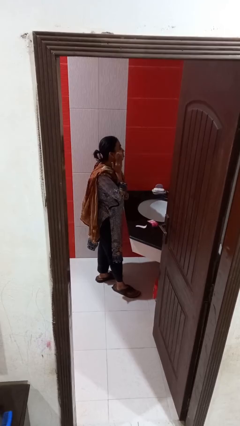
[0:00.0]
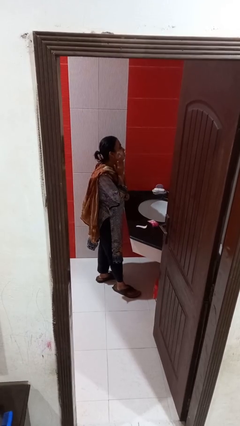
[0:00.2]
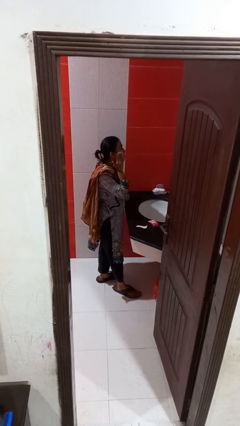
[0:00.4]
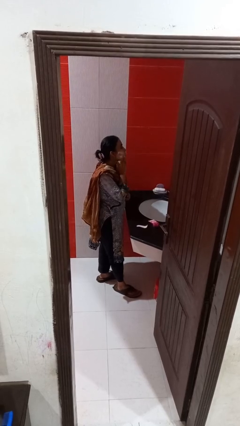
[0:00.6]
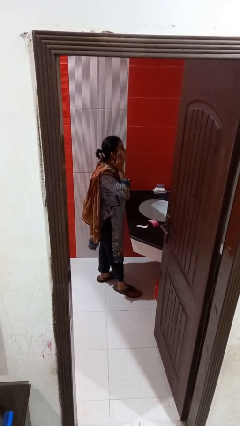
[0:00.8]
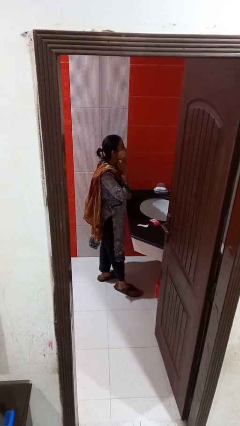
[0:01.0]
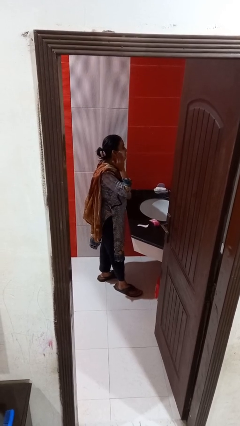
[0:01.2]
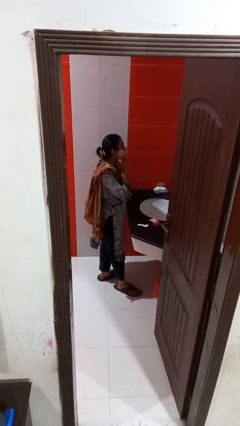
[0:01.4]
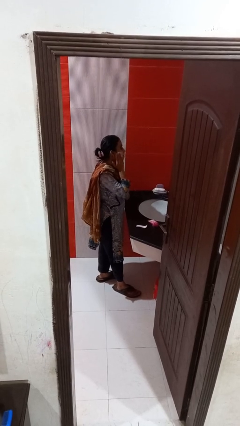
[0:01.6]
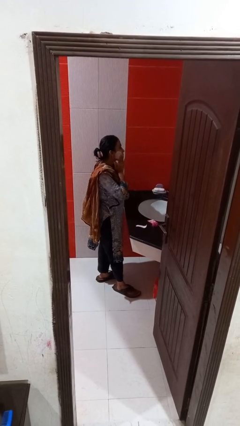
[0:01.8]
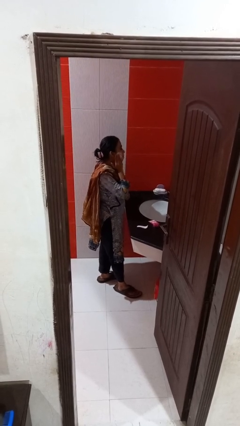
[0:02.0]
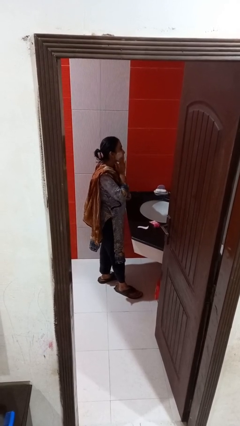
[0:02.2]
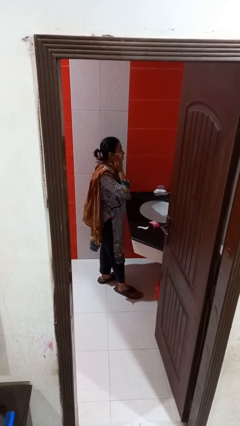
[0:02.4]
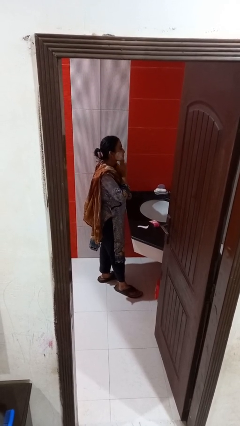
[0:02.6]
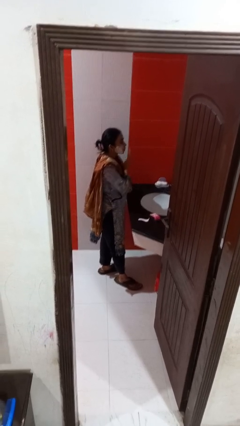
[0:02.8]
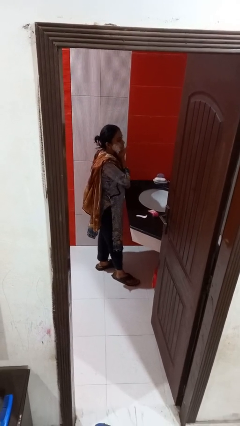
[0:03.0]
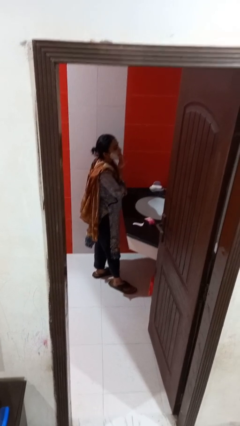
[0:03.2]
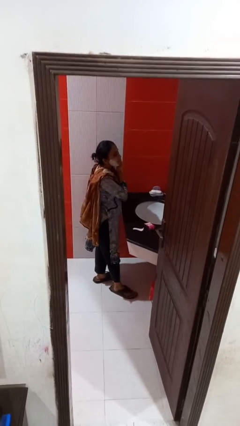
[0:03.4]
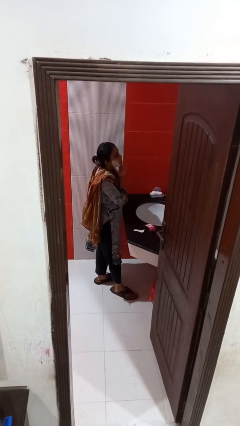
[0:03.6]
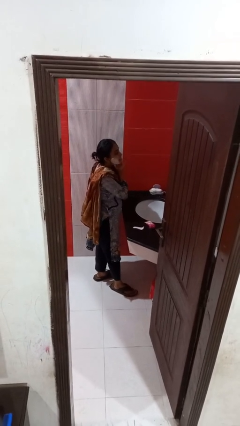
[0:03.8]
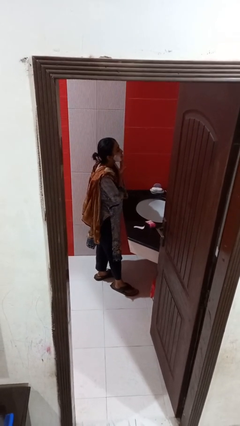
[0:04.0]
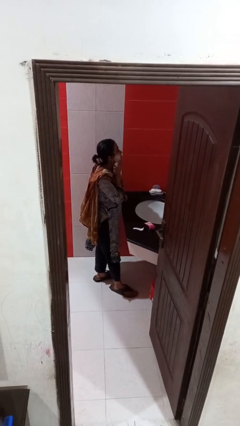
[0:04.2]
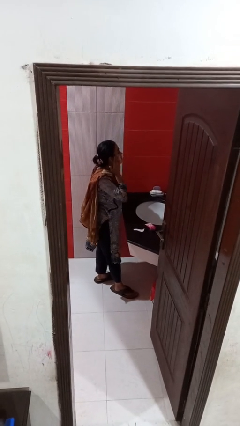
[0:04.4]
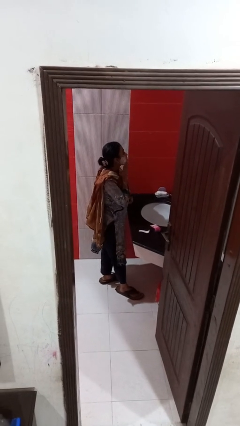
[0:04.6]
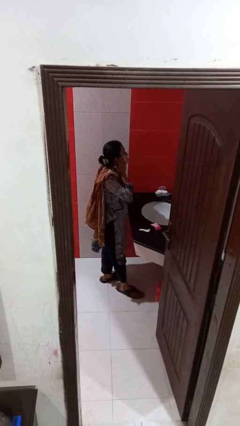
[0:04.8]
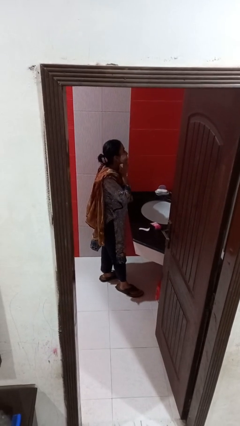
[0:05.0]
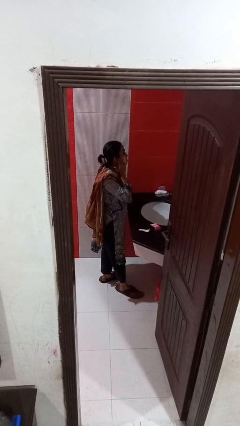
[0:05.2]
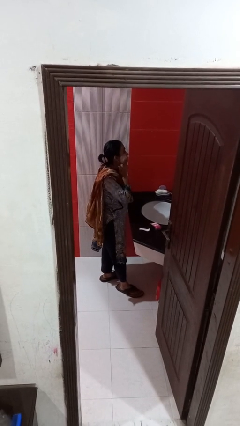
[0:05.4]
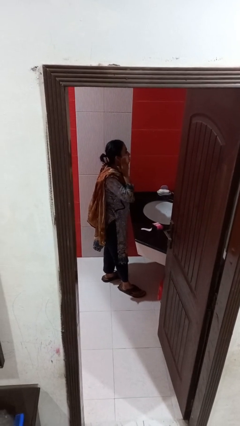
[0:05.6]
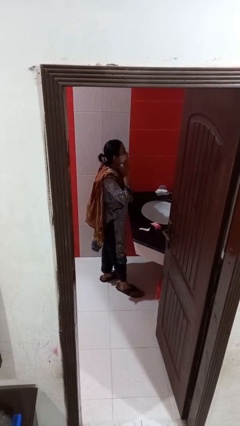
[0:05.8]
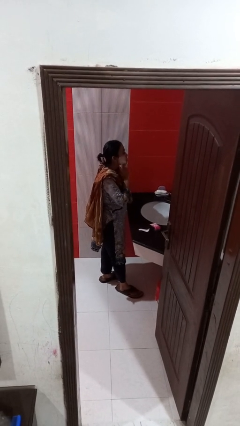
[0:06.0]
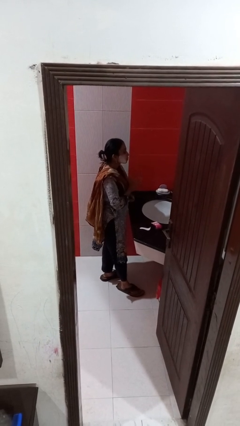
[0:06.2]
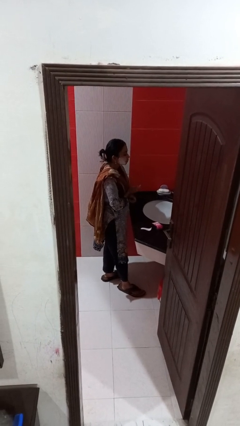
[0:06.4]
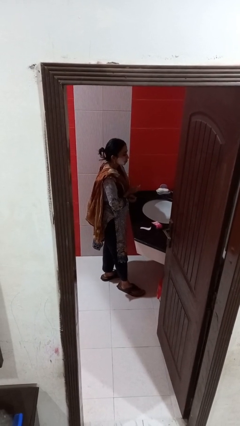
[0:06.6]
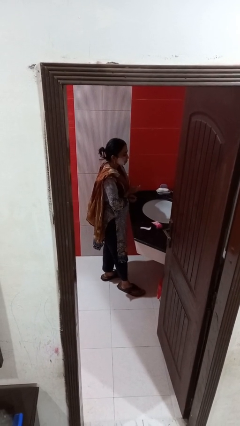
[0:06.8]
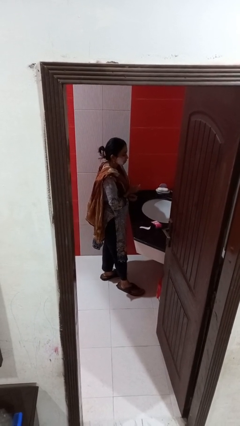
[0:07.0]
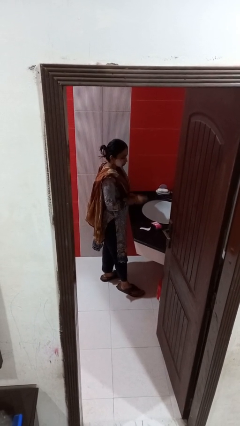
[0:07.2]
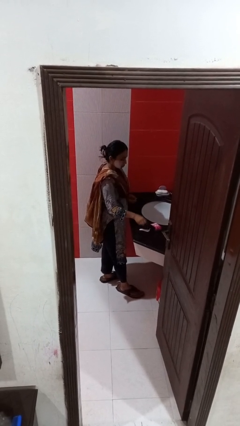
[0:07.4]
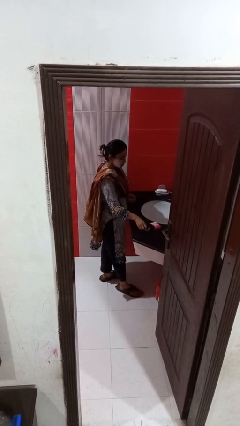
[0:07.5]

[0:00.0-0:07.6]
person applies shaving cream

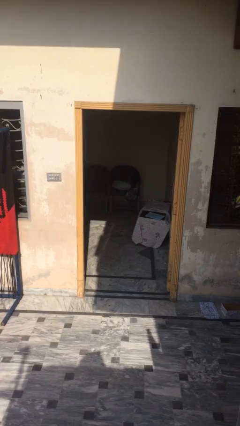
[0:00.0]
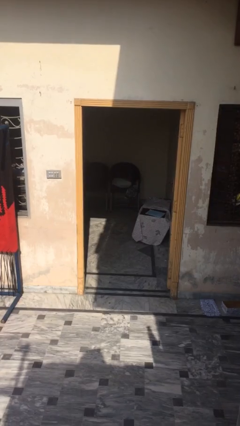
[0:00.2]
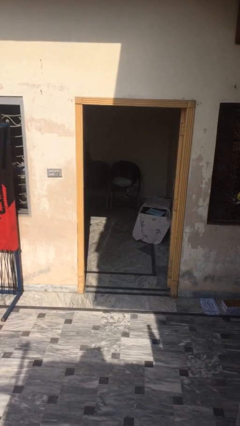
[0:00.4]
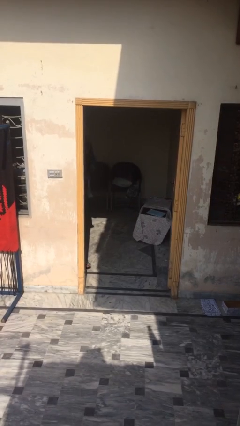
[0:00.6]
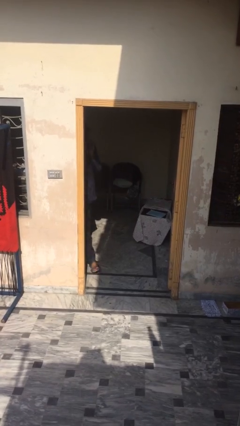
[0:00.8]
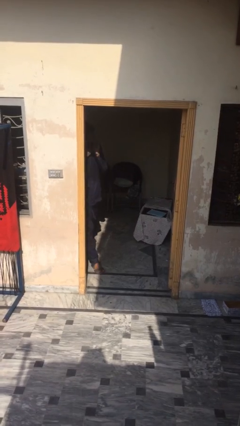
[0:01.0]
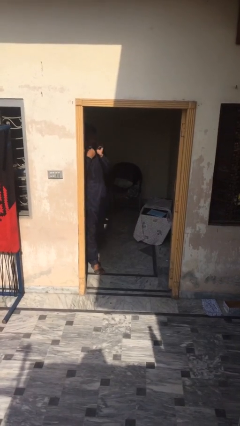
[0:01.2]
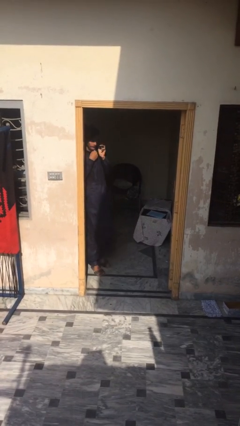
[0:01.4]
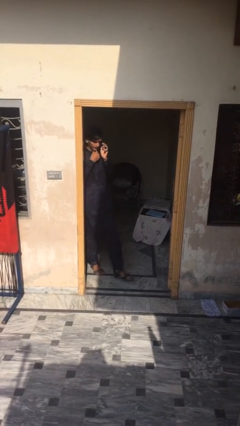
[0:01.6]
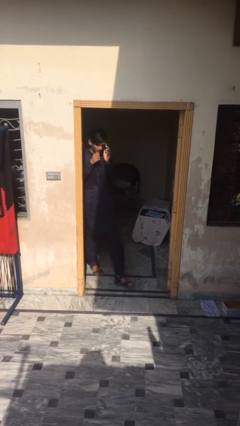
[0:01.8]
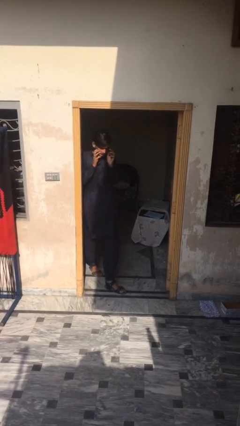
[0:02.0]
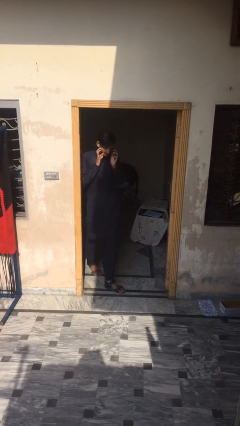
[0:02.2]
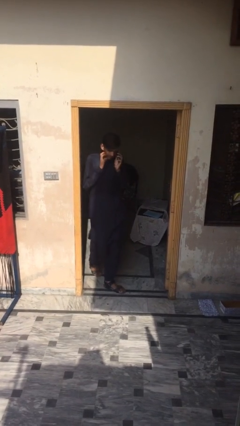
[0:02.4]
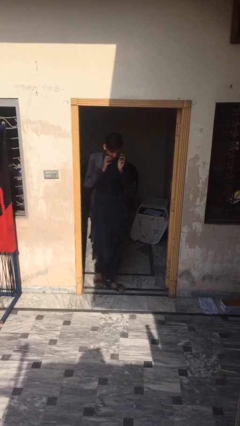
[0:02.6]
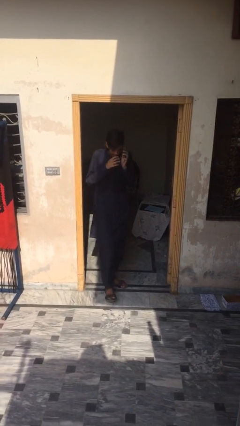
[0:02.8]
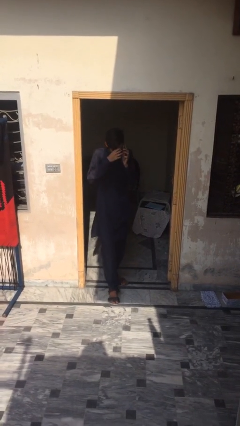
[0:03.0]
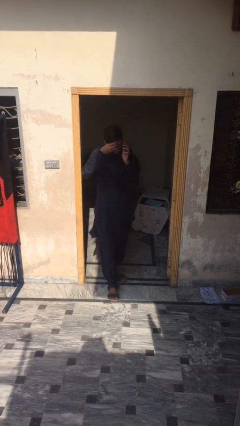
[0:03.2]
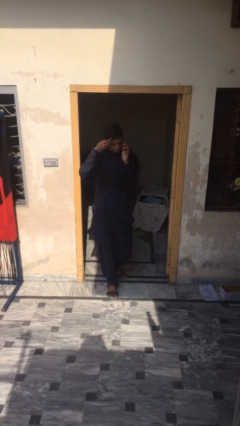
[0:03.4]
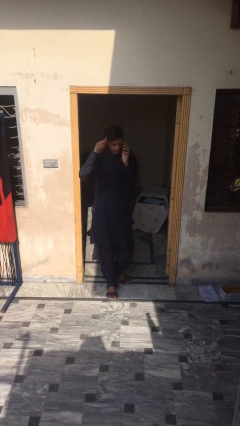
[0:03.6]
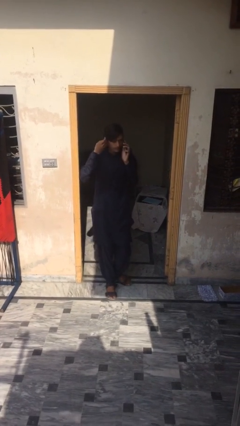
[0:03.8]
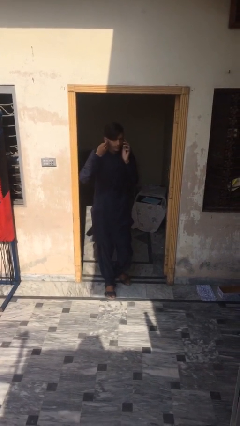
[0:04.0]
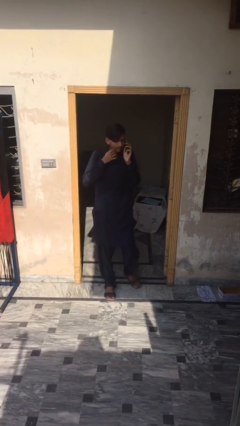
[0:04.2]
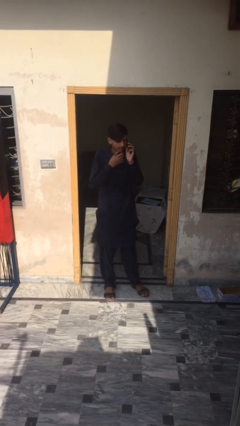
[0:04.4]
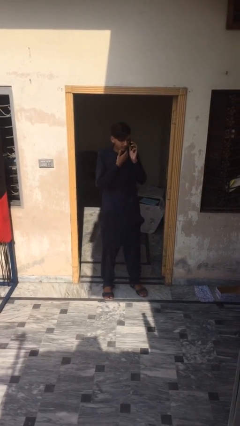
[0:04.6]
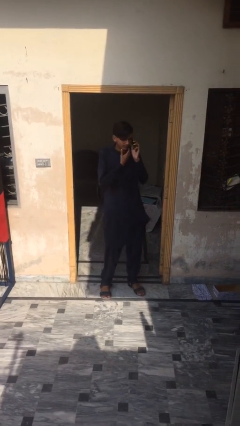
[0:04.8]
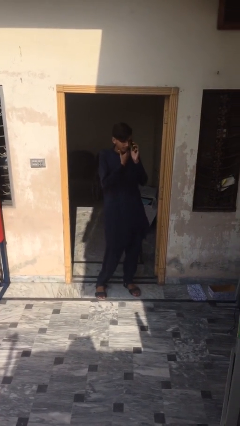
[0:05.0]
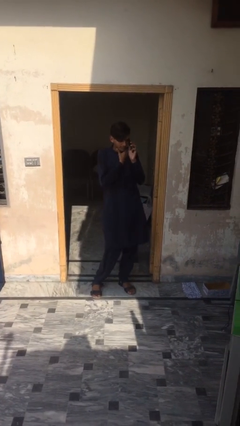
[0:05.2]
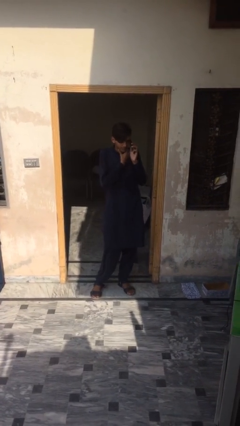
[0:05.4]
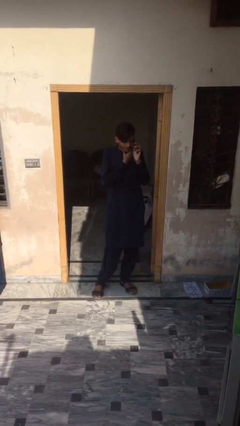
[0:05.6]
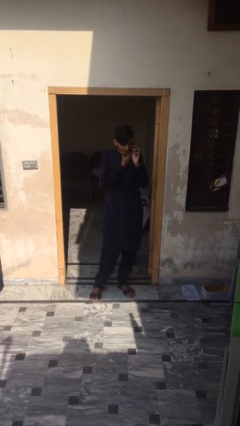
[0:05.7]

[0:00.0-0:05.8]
person enters scene through structure

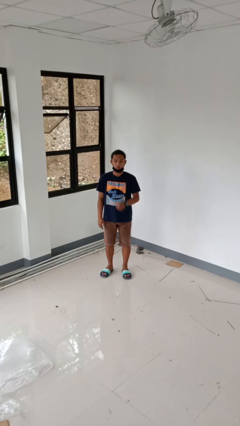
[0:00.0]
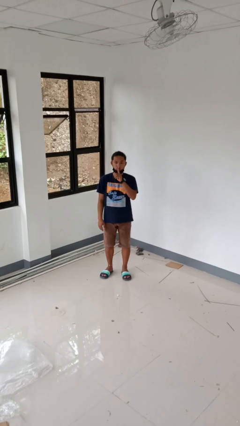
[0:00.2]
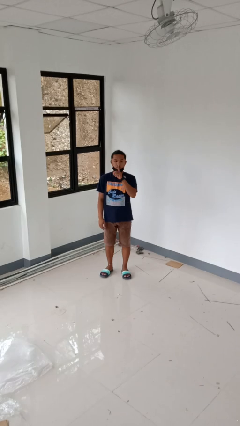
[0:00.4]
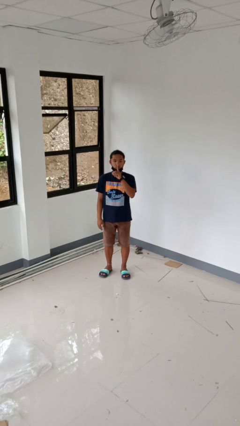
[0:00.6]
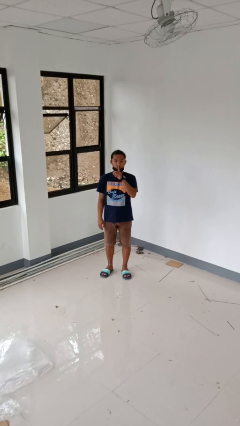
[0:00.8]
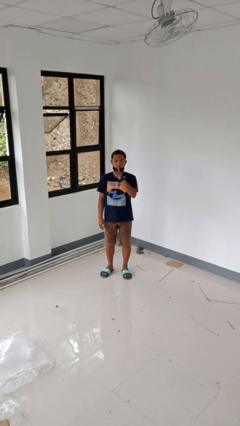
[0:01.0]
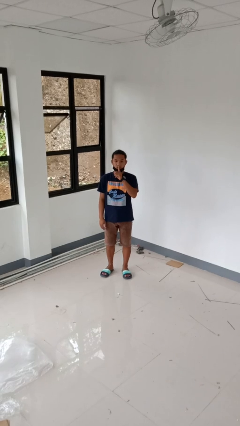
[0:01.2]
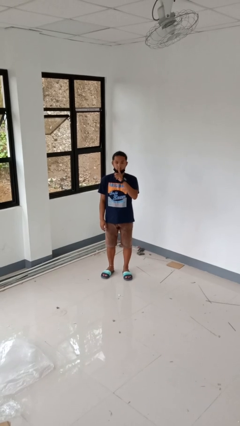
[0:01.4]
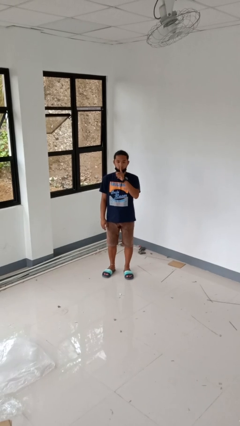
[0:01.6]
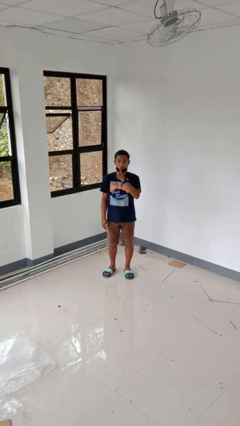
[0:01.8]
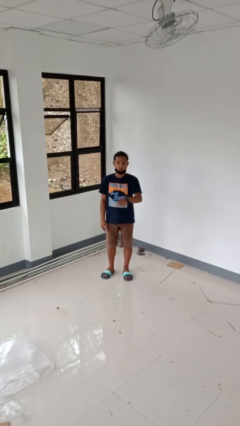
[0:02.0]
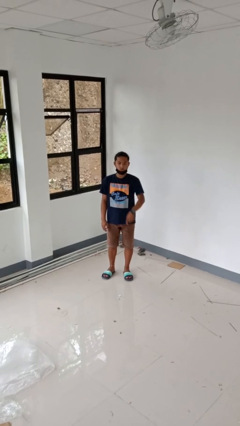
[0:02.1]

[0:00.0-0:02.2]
person gestures be quiet

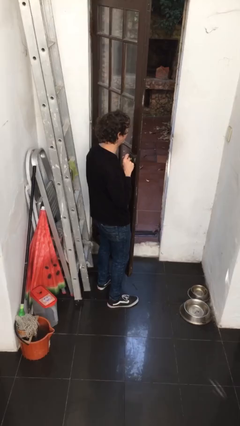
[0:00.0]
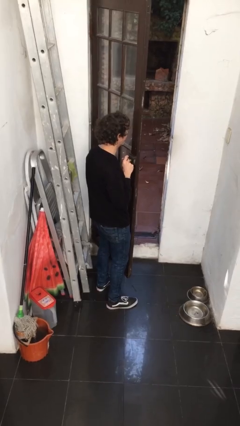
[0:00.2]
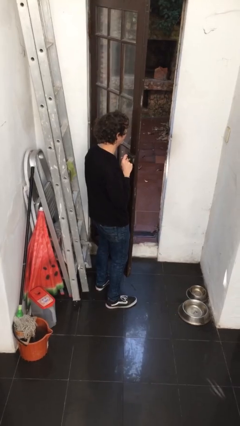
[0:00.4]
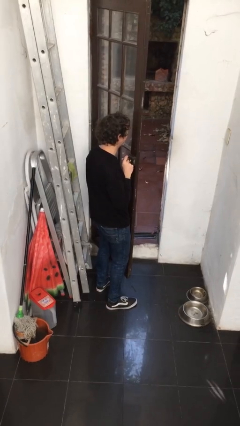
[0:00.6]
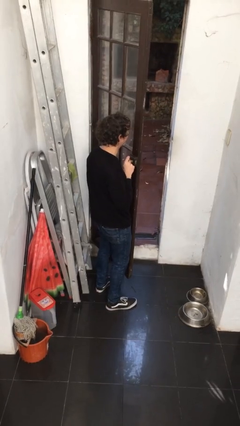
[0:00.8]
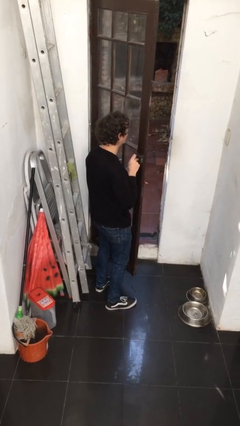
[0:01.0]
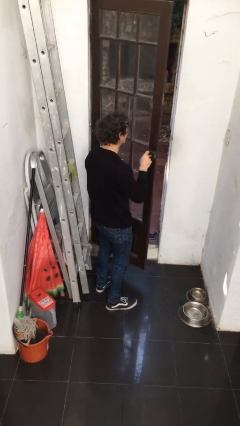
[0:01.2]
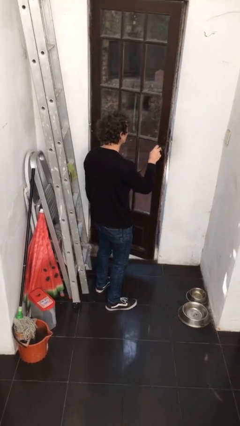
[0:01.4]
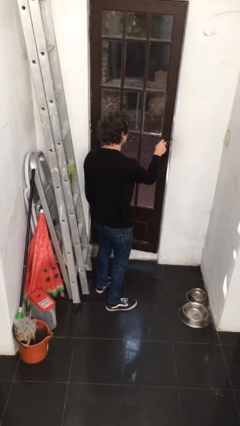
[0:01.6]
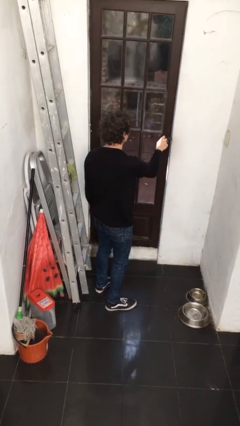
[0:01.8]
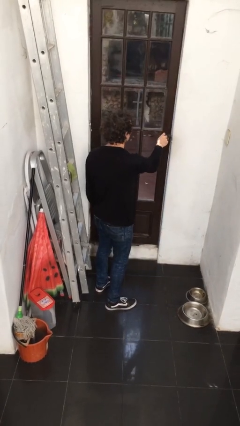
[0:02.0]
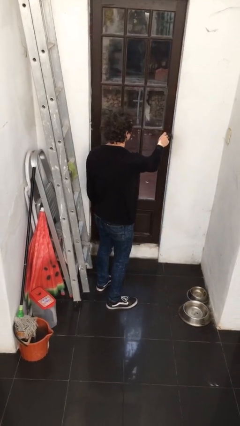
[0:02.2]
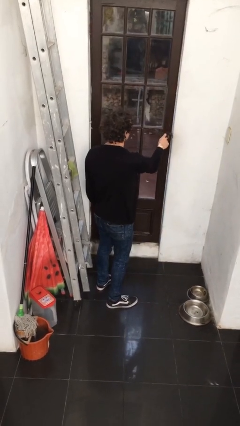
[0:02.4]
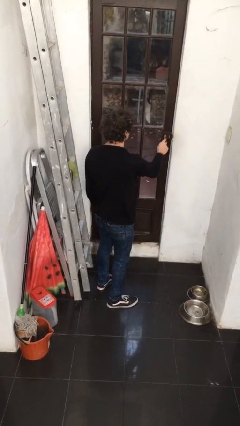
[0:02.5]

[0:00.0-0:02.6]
person closes facility door
